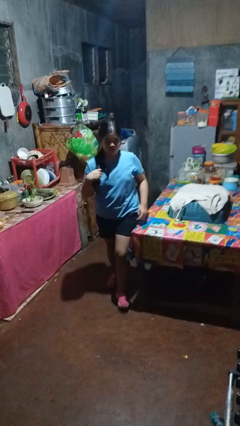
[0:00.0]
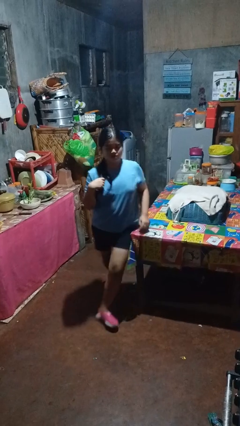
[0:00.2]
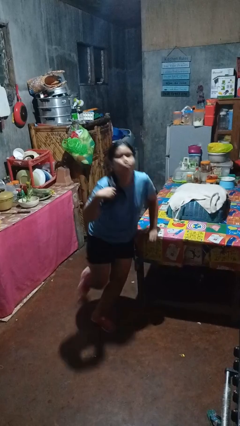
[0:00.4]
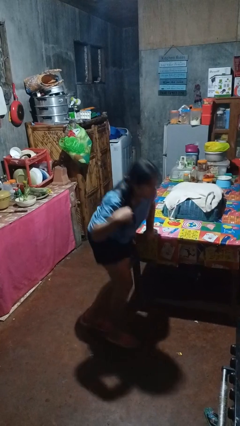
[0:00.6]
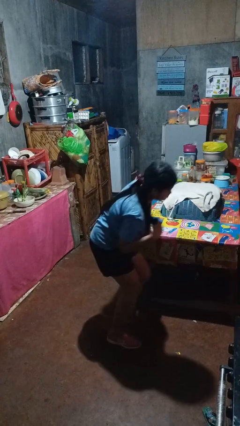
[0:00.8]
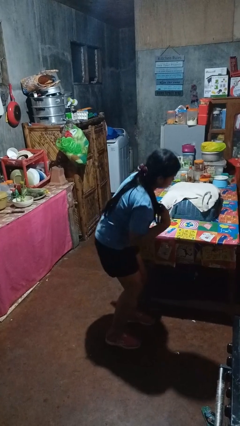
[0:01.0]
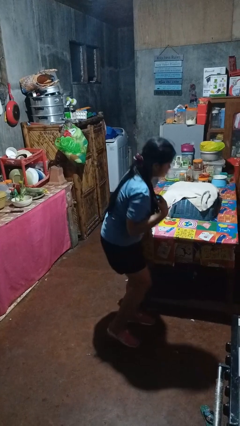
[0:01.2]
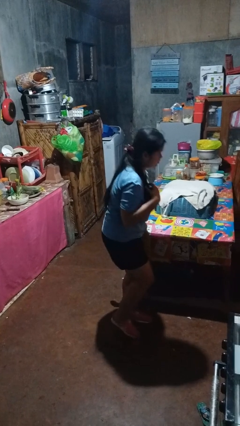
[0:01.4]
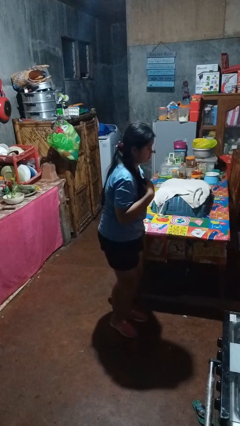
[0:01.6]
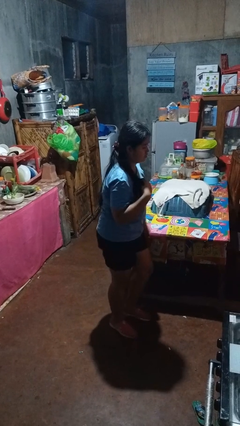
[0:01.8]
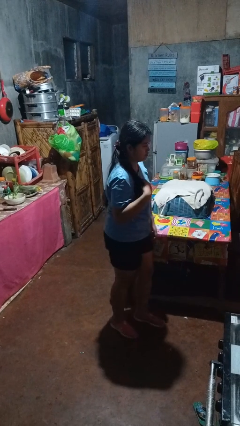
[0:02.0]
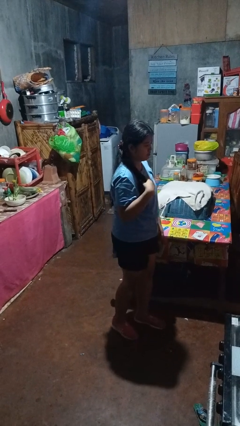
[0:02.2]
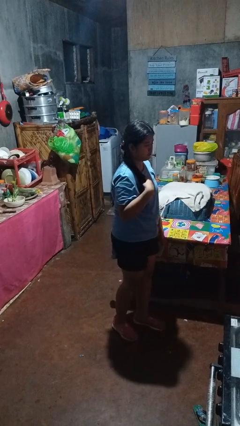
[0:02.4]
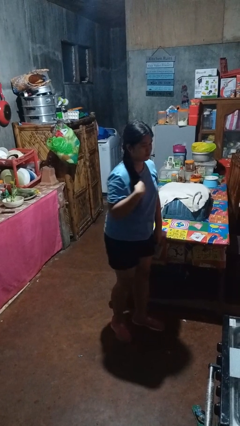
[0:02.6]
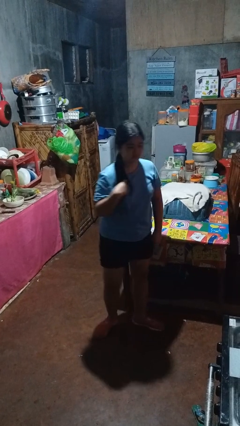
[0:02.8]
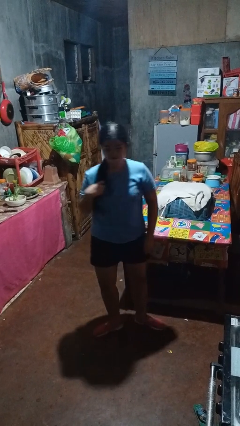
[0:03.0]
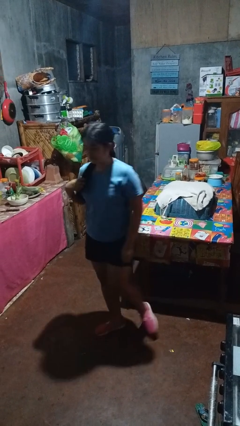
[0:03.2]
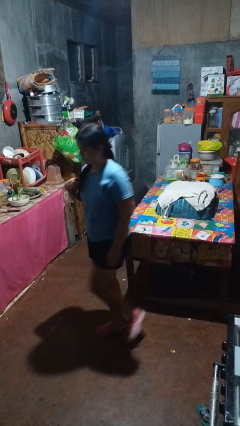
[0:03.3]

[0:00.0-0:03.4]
person bumps into table

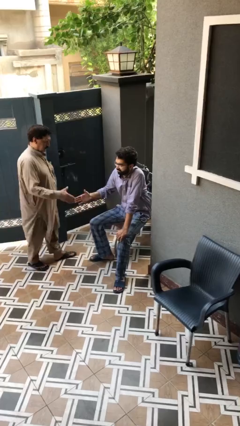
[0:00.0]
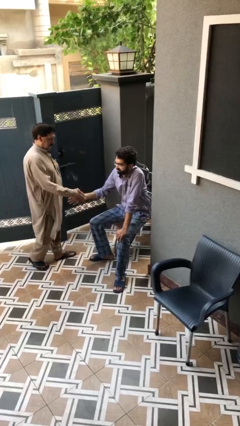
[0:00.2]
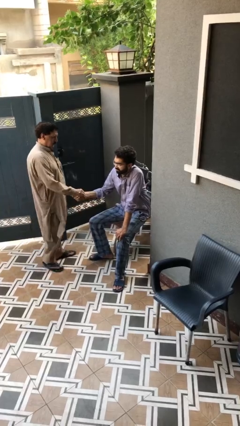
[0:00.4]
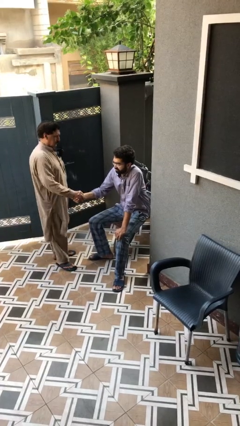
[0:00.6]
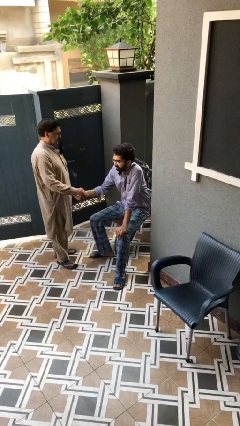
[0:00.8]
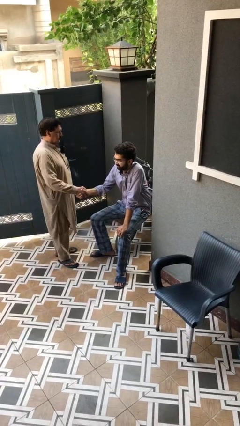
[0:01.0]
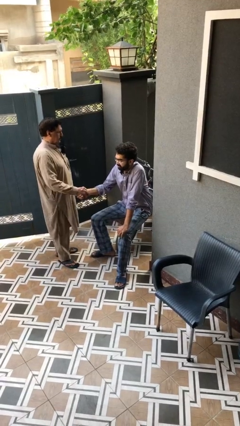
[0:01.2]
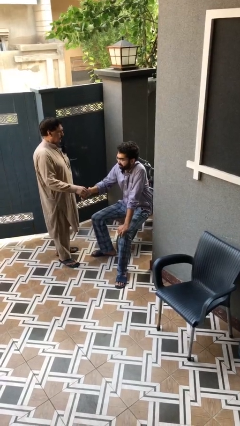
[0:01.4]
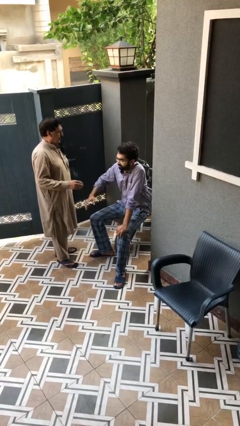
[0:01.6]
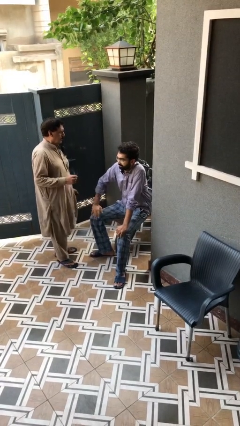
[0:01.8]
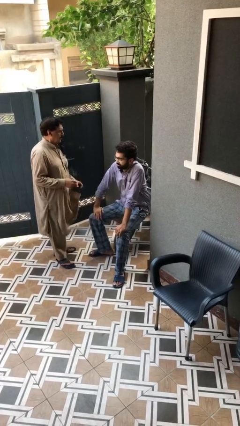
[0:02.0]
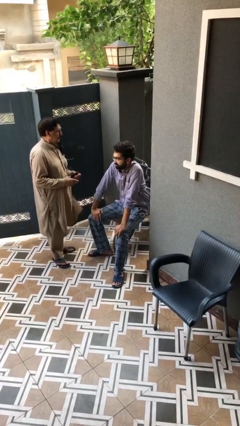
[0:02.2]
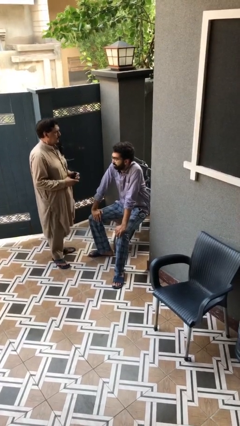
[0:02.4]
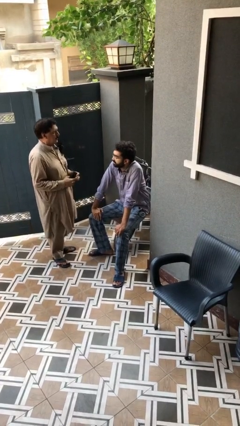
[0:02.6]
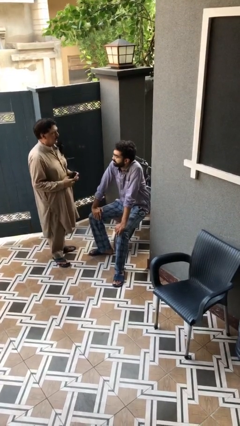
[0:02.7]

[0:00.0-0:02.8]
person shakes hand

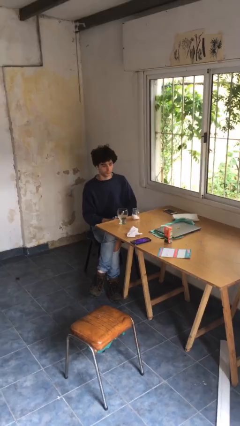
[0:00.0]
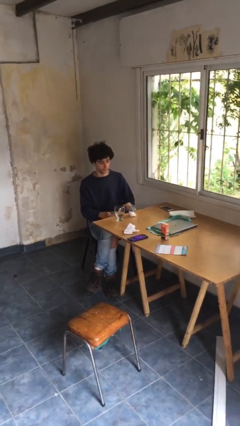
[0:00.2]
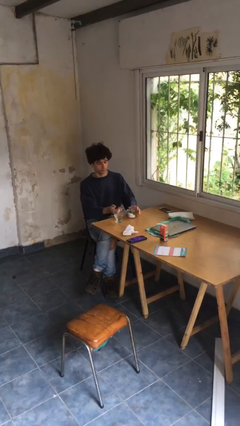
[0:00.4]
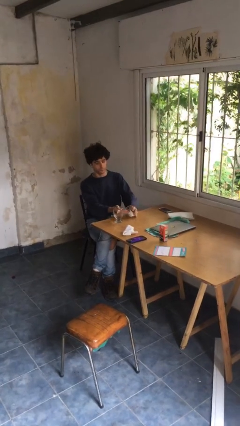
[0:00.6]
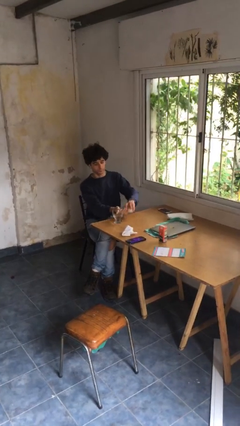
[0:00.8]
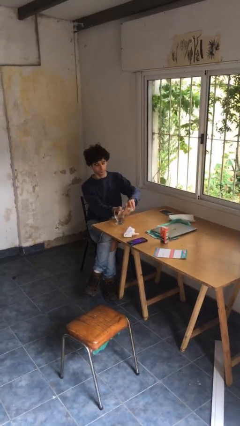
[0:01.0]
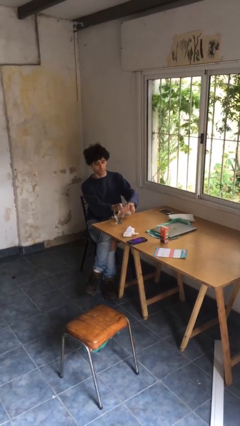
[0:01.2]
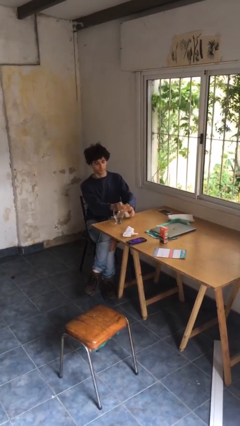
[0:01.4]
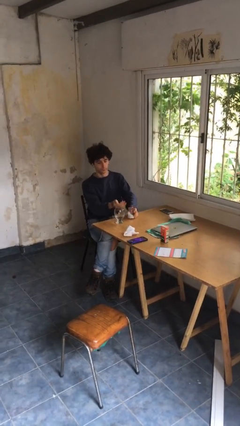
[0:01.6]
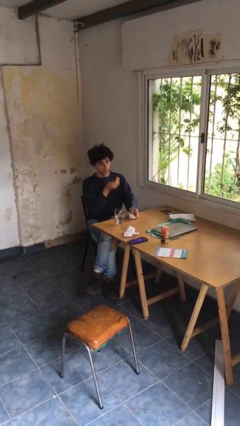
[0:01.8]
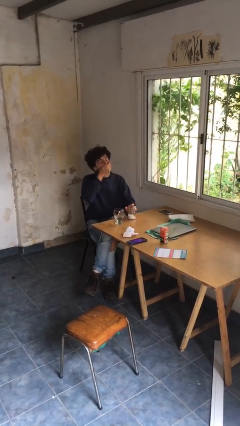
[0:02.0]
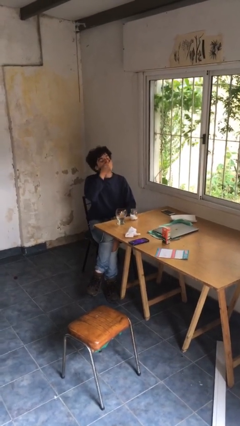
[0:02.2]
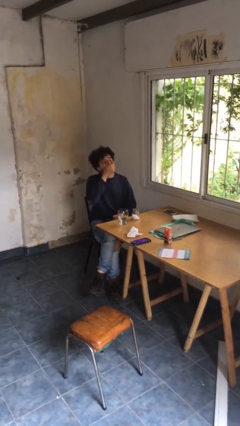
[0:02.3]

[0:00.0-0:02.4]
person takes medicine pills

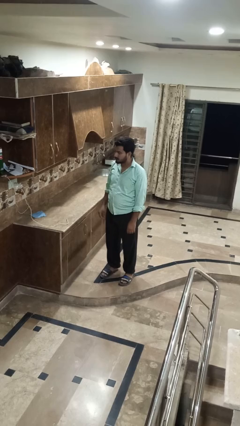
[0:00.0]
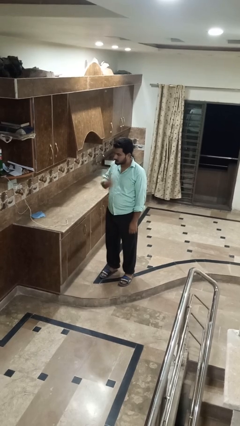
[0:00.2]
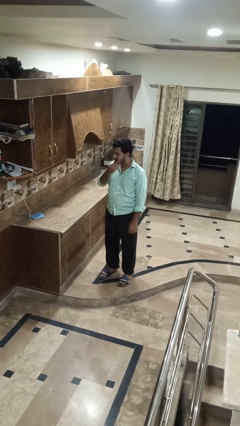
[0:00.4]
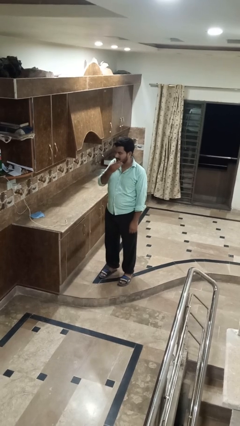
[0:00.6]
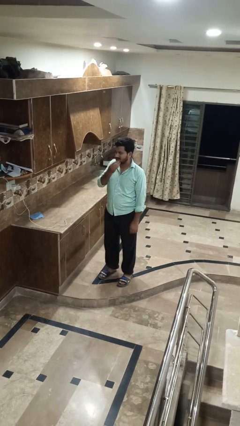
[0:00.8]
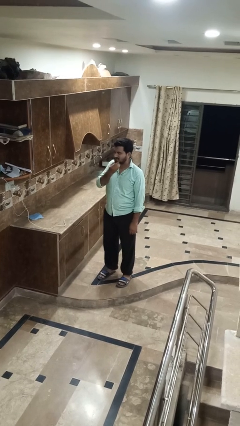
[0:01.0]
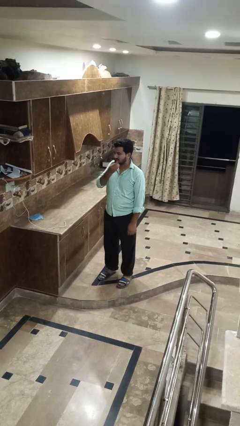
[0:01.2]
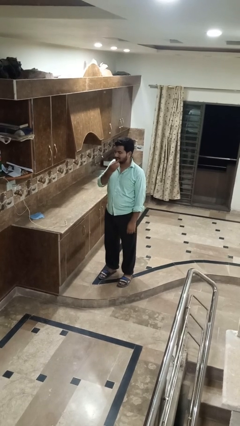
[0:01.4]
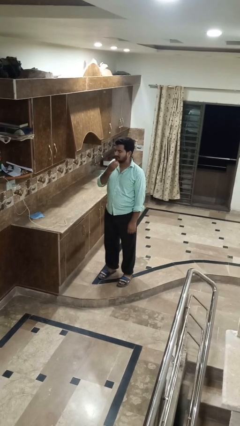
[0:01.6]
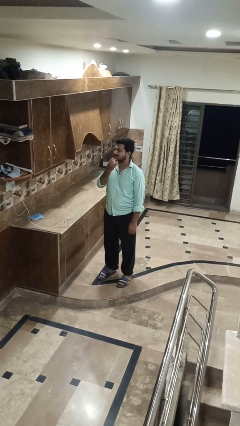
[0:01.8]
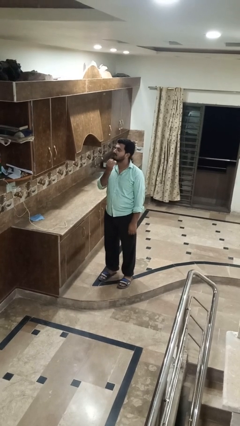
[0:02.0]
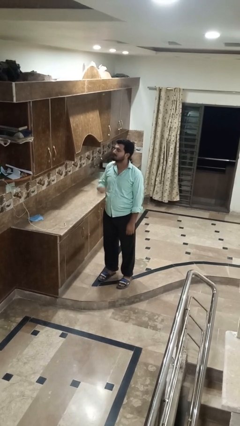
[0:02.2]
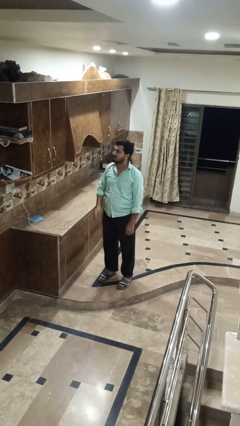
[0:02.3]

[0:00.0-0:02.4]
person strokes chin

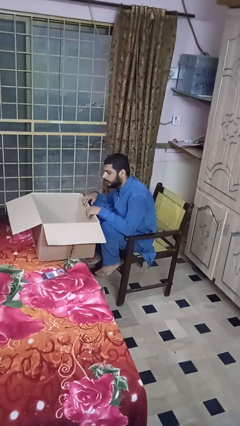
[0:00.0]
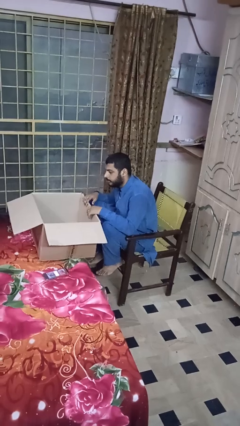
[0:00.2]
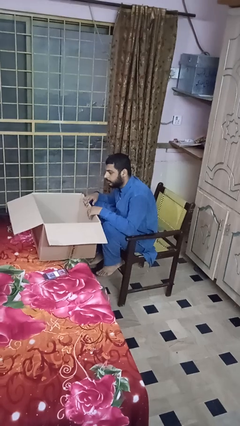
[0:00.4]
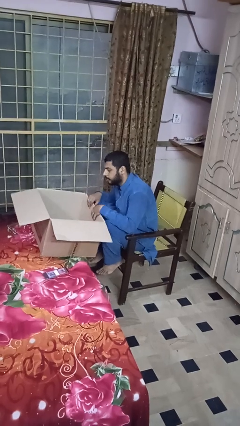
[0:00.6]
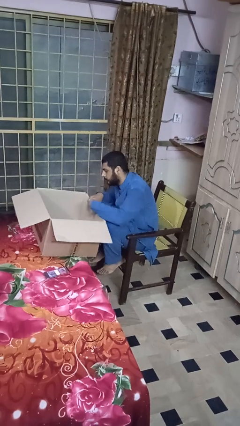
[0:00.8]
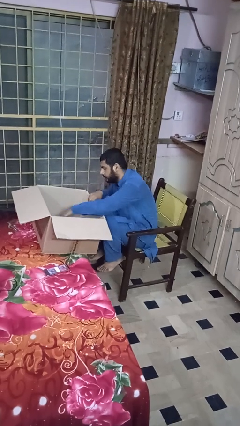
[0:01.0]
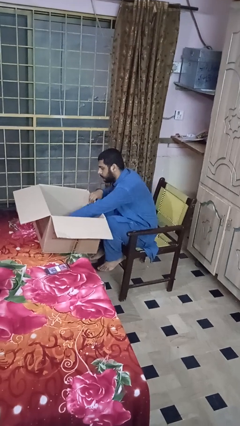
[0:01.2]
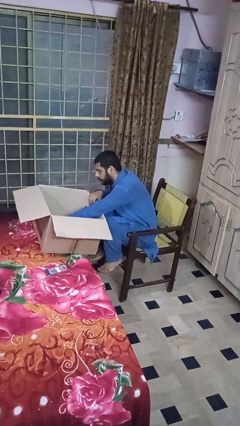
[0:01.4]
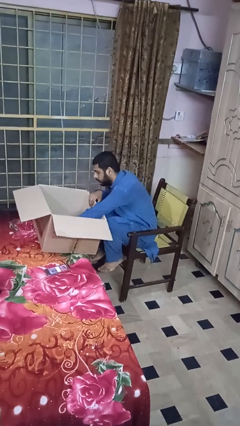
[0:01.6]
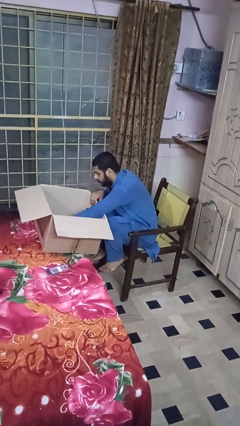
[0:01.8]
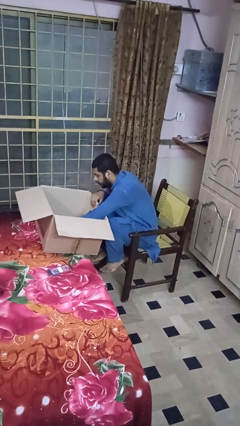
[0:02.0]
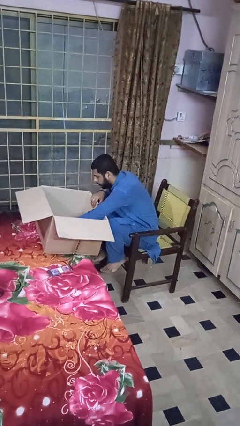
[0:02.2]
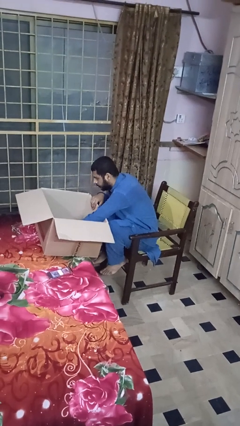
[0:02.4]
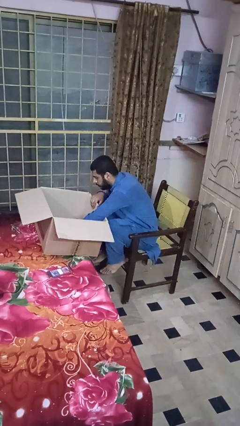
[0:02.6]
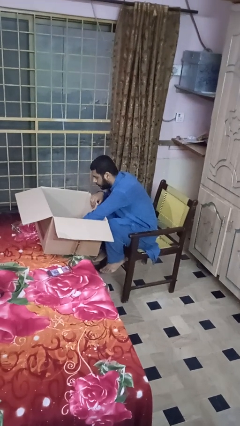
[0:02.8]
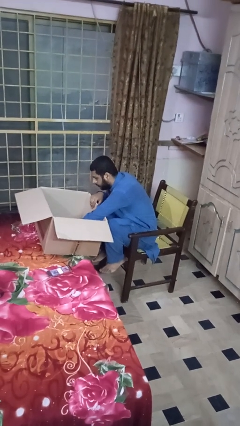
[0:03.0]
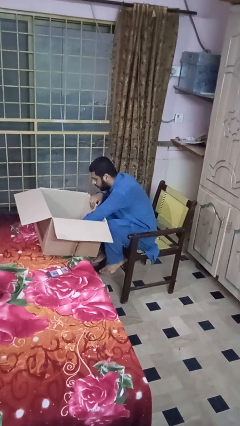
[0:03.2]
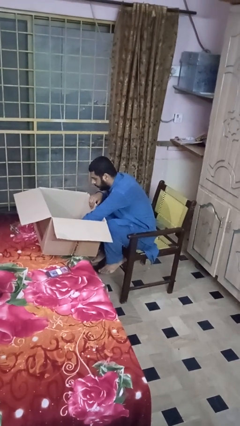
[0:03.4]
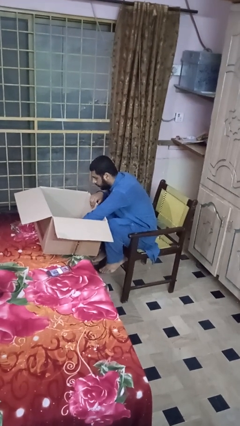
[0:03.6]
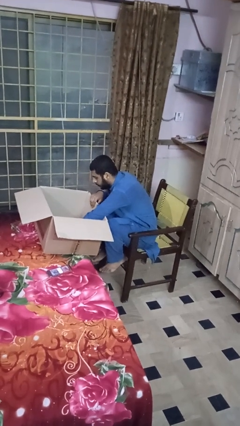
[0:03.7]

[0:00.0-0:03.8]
person searches in box

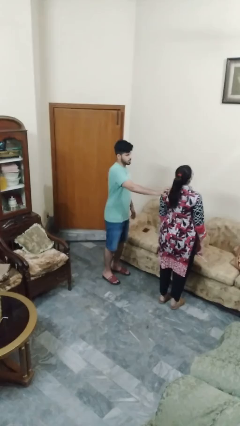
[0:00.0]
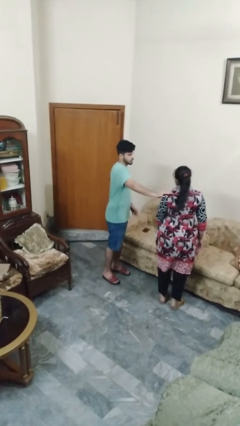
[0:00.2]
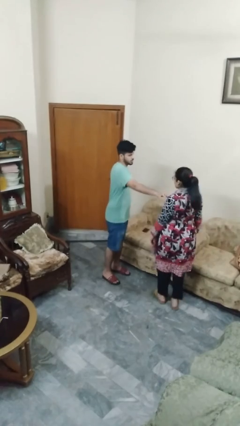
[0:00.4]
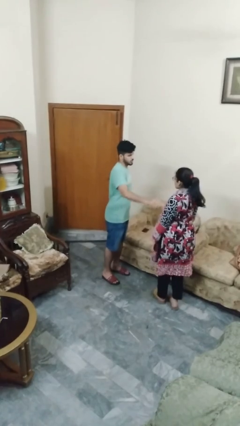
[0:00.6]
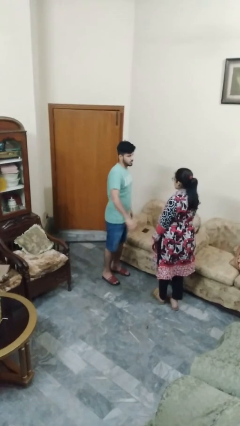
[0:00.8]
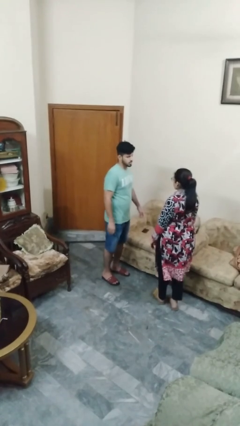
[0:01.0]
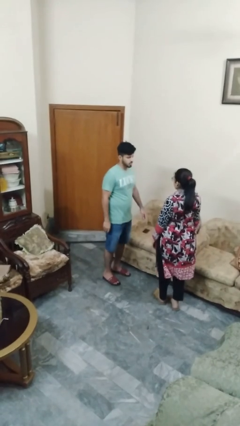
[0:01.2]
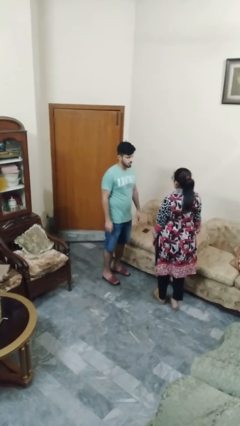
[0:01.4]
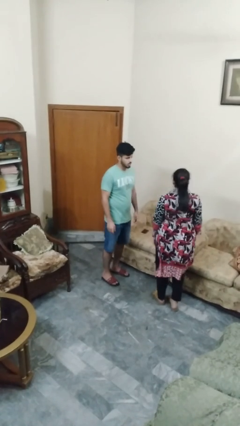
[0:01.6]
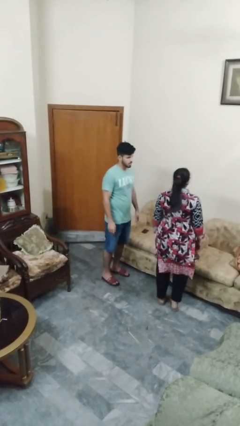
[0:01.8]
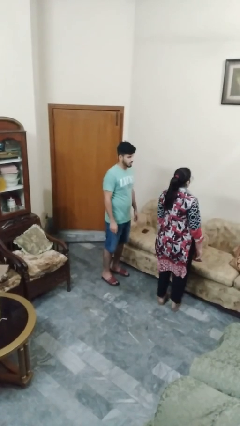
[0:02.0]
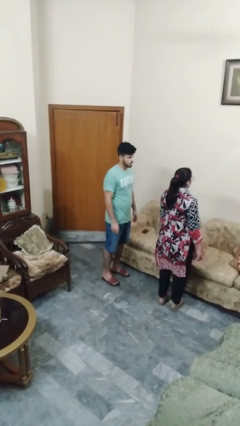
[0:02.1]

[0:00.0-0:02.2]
person spins person around

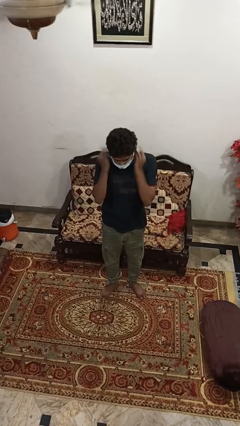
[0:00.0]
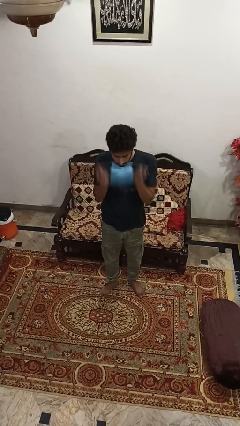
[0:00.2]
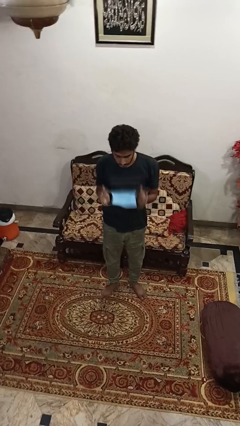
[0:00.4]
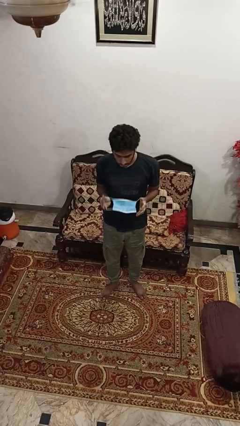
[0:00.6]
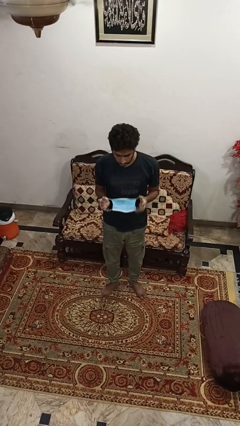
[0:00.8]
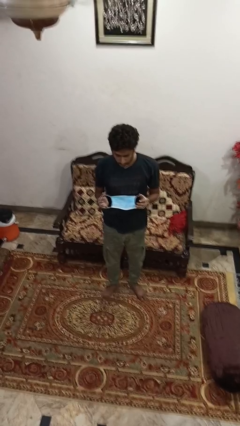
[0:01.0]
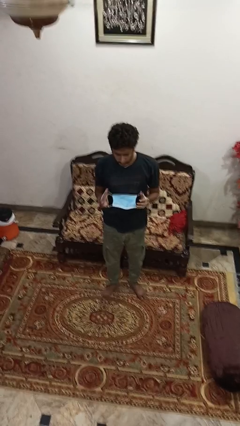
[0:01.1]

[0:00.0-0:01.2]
person takes off facemask
